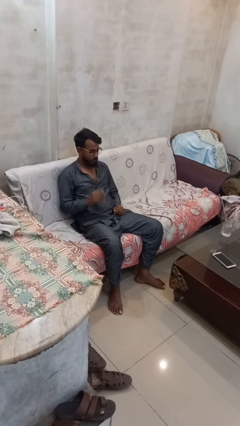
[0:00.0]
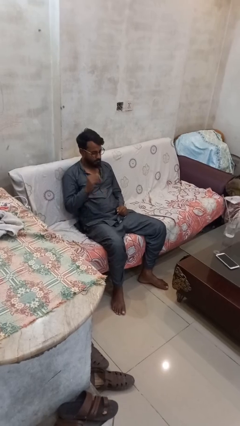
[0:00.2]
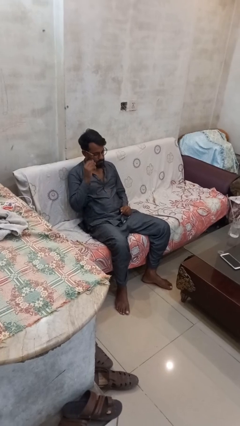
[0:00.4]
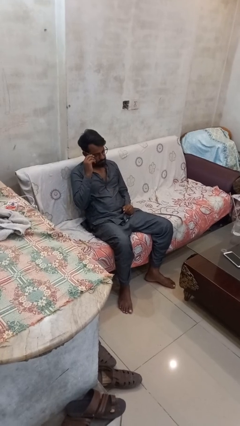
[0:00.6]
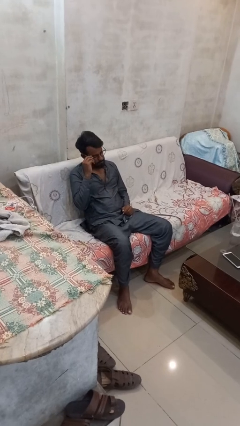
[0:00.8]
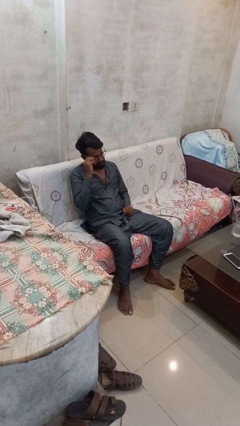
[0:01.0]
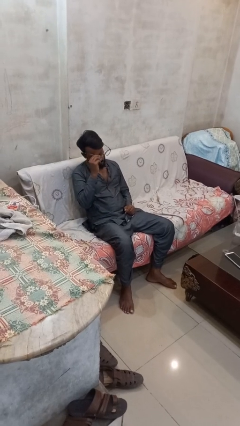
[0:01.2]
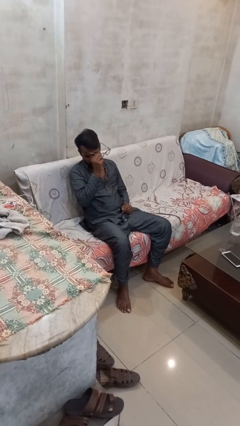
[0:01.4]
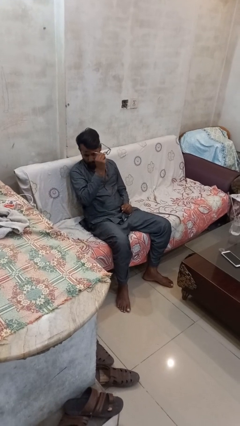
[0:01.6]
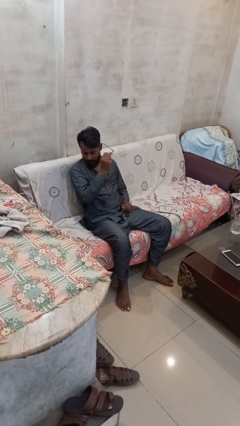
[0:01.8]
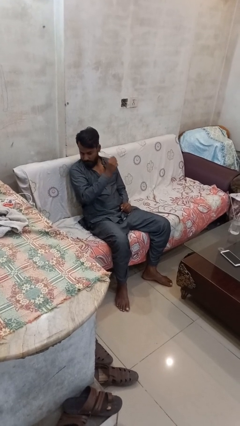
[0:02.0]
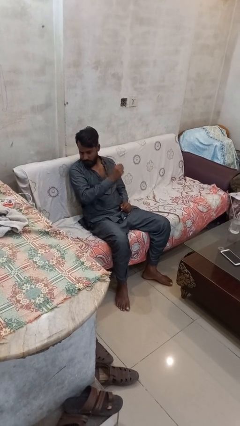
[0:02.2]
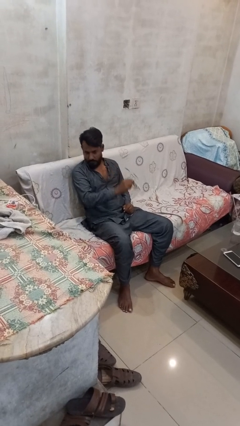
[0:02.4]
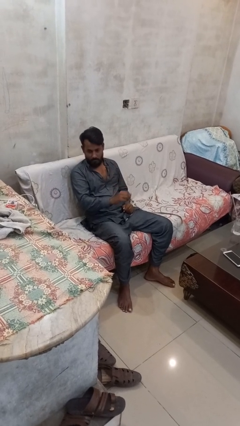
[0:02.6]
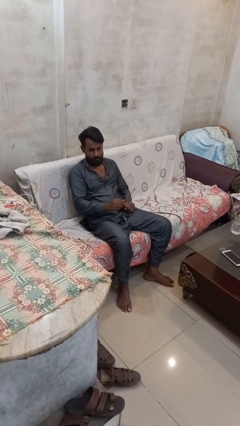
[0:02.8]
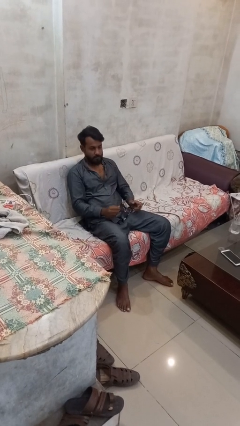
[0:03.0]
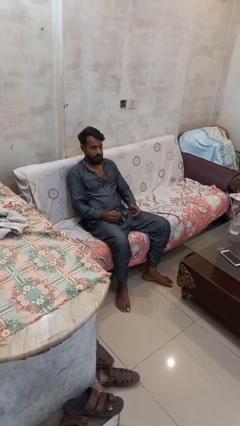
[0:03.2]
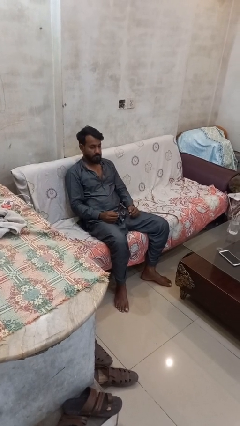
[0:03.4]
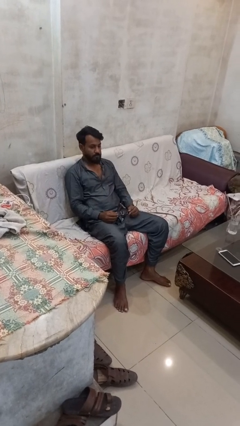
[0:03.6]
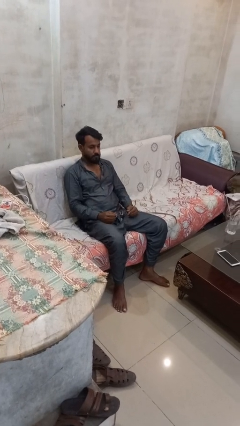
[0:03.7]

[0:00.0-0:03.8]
person takes off glasses

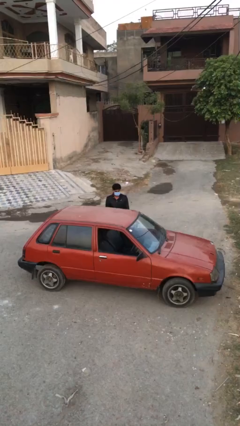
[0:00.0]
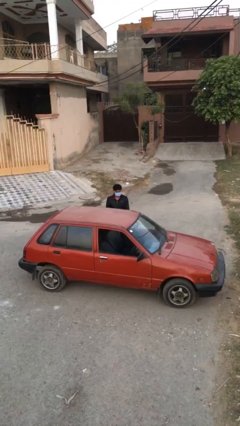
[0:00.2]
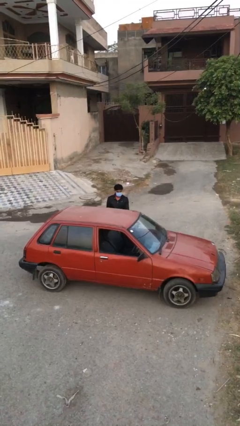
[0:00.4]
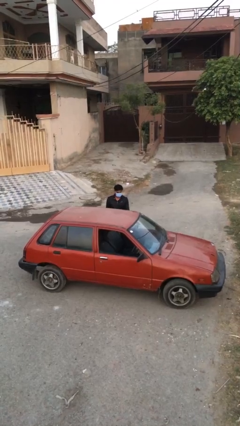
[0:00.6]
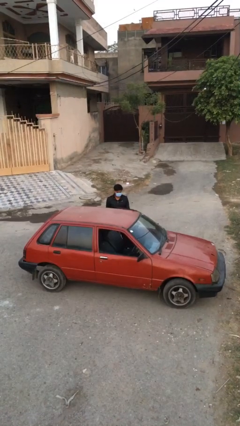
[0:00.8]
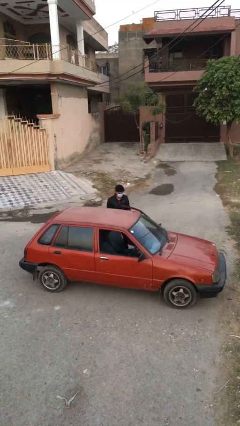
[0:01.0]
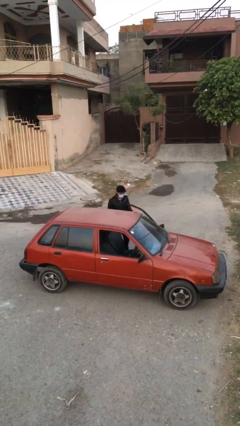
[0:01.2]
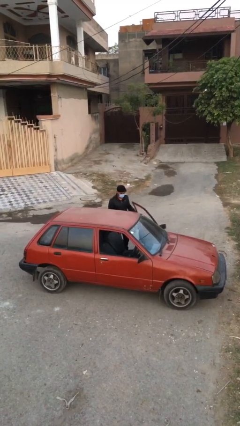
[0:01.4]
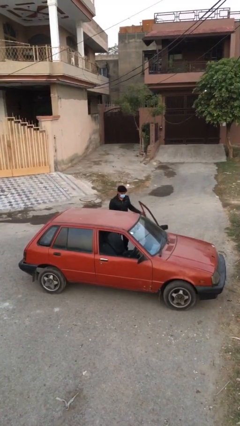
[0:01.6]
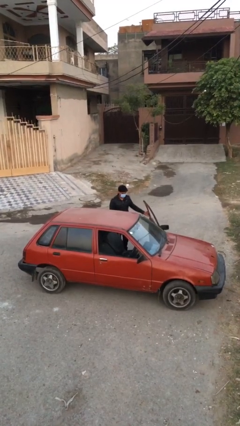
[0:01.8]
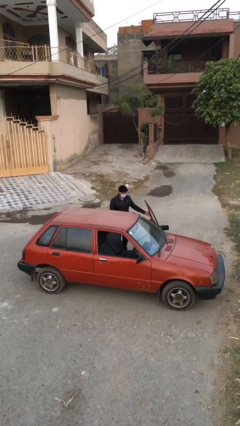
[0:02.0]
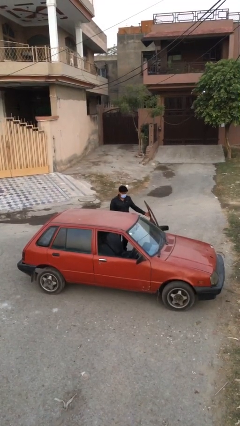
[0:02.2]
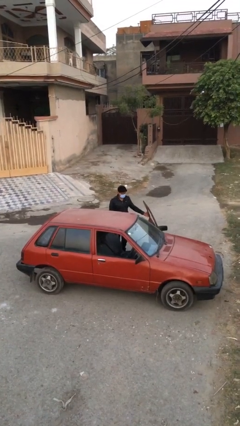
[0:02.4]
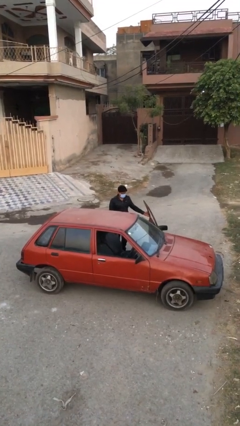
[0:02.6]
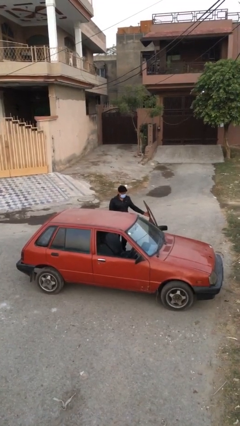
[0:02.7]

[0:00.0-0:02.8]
person opens car door

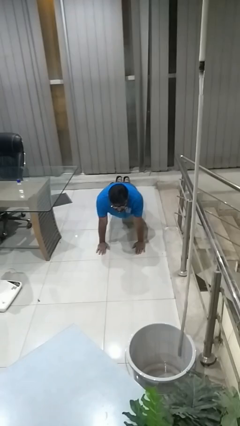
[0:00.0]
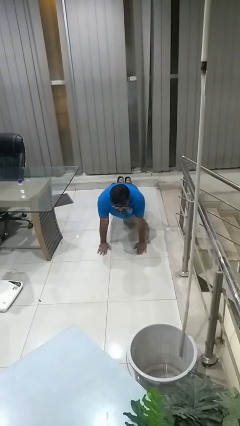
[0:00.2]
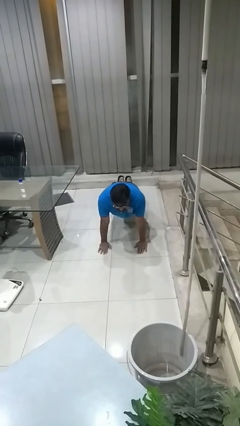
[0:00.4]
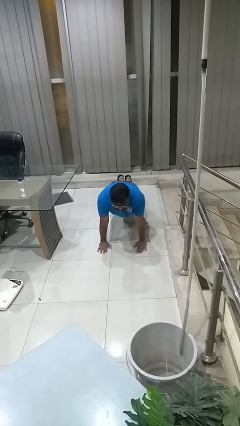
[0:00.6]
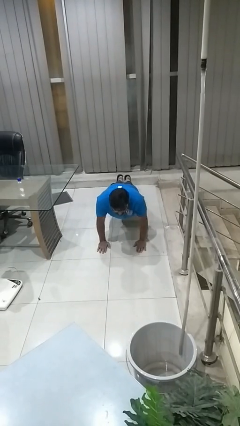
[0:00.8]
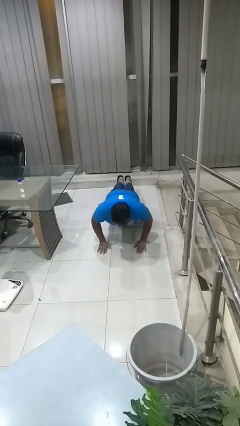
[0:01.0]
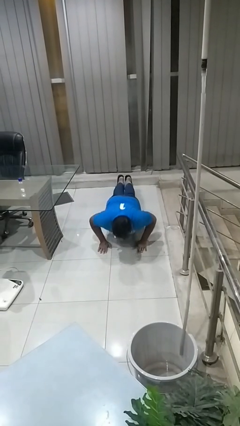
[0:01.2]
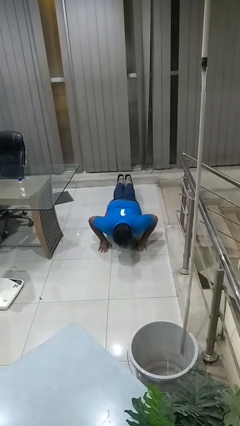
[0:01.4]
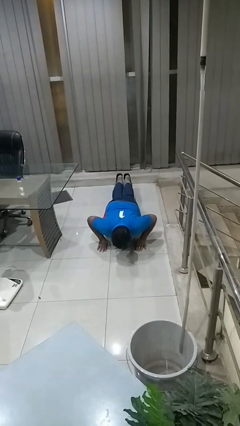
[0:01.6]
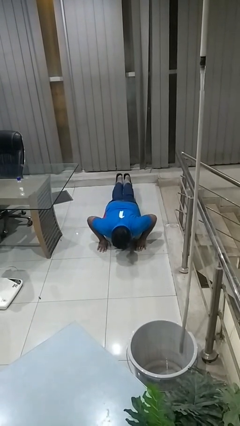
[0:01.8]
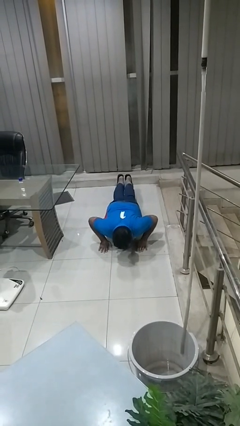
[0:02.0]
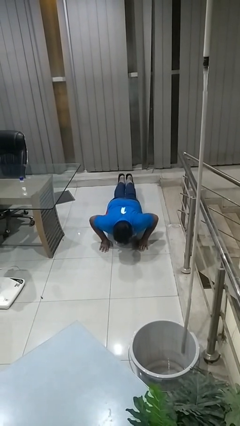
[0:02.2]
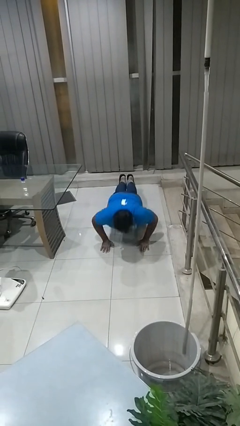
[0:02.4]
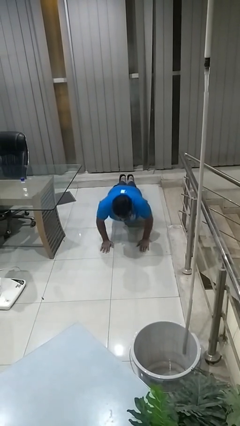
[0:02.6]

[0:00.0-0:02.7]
person exercises with pushup

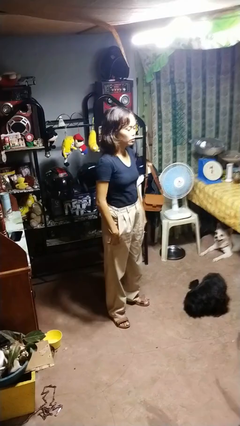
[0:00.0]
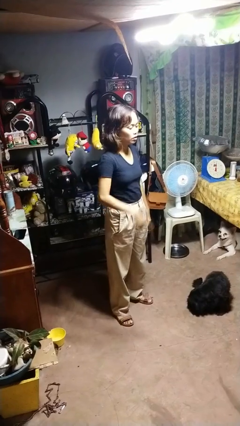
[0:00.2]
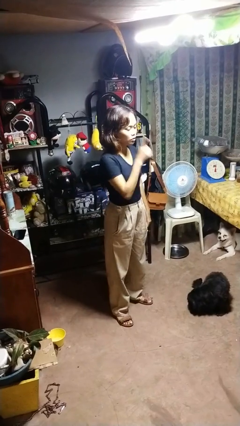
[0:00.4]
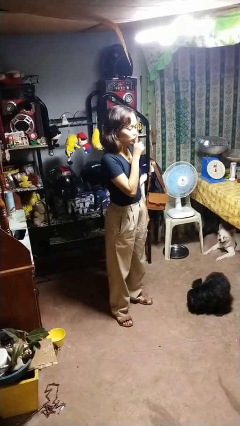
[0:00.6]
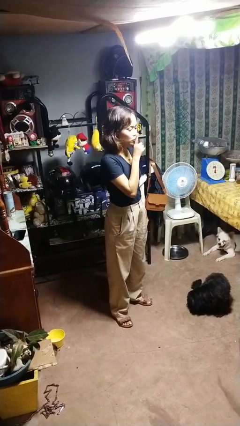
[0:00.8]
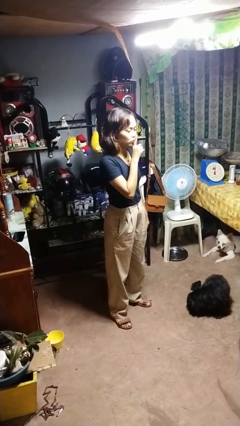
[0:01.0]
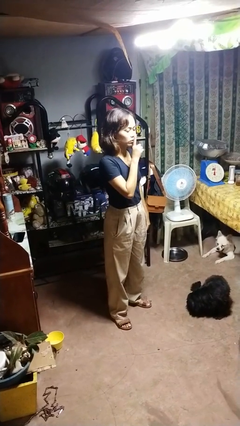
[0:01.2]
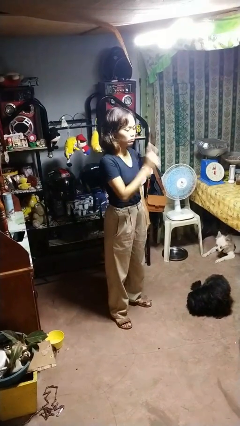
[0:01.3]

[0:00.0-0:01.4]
person gestures be quiet

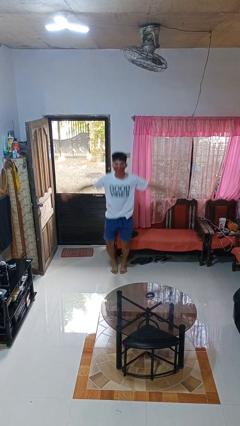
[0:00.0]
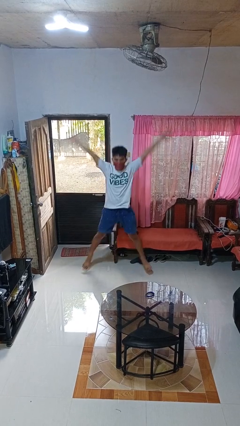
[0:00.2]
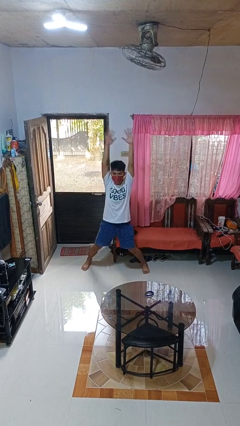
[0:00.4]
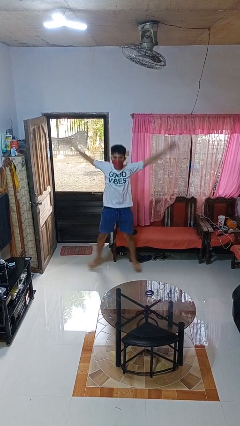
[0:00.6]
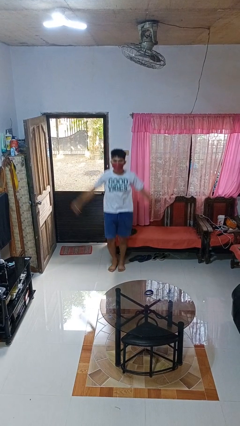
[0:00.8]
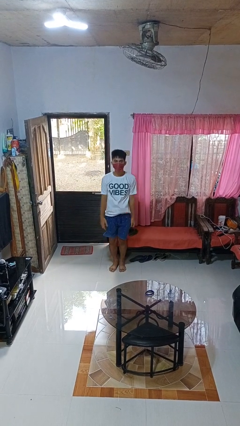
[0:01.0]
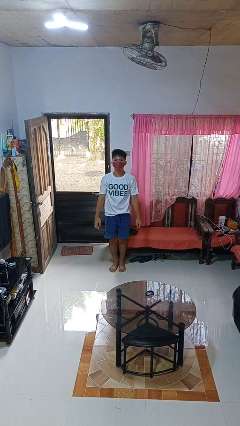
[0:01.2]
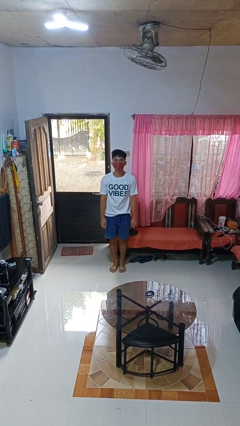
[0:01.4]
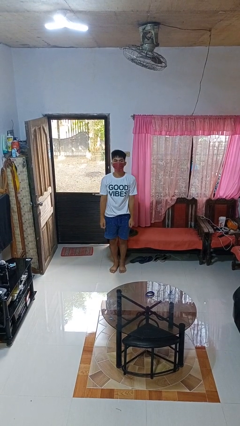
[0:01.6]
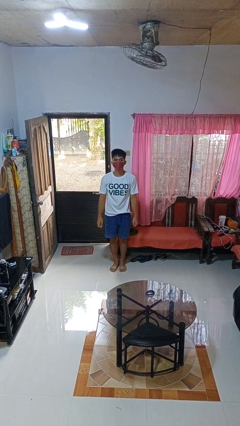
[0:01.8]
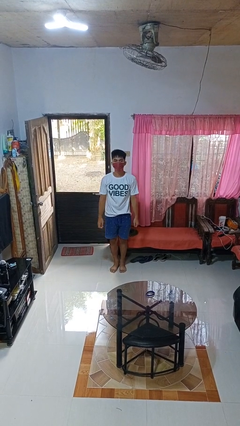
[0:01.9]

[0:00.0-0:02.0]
person exercises with jumping jacks

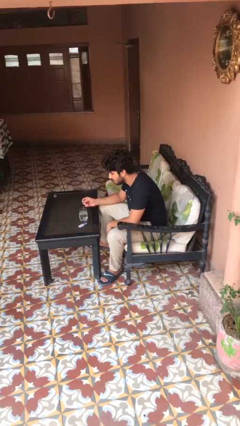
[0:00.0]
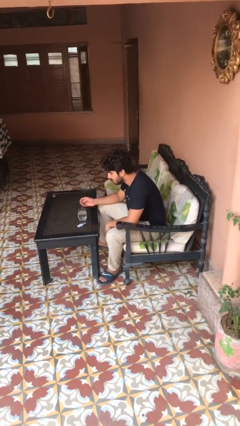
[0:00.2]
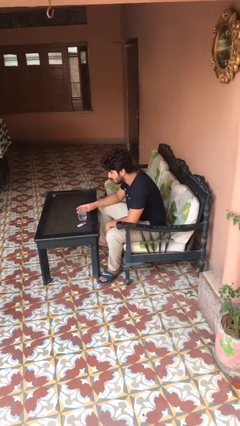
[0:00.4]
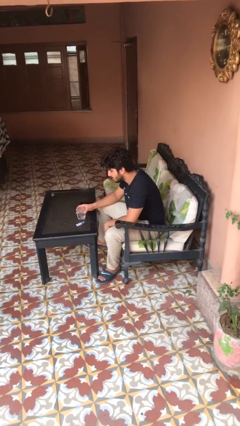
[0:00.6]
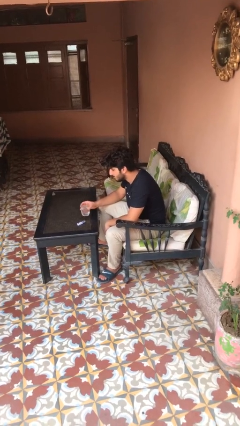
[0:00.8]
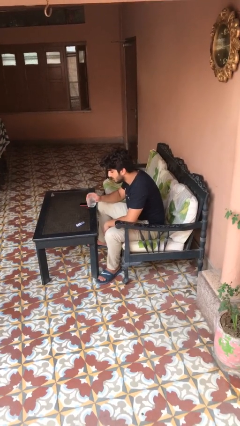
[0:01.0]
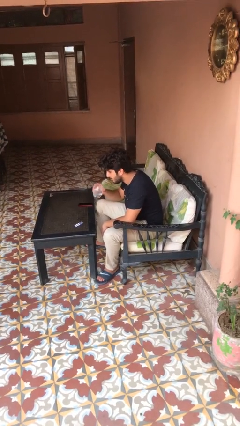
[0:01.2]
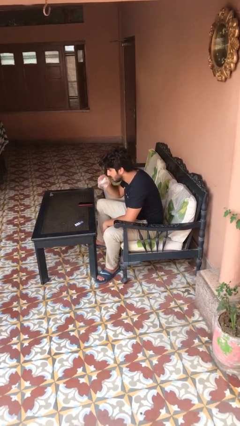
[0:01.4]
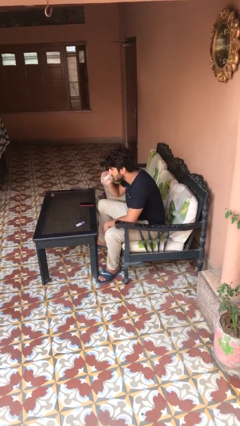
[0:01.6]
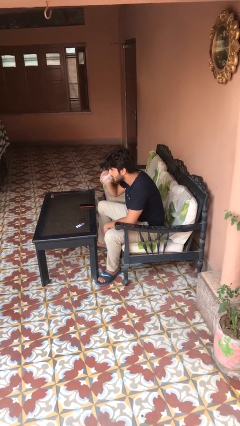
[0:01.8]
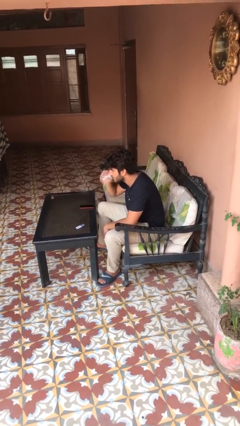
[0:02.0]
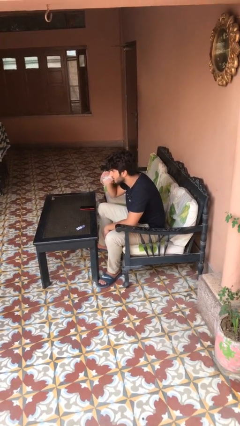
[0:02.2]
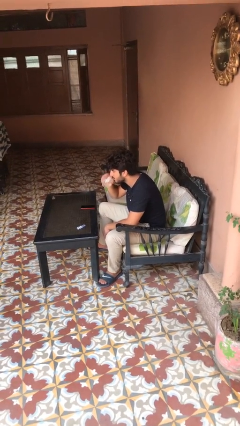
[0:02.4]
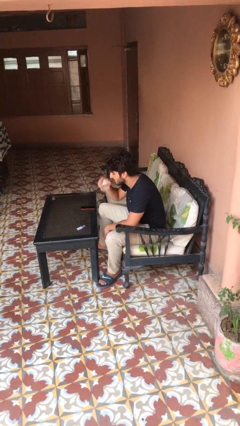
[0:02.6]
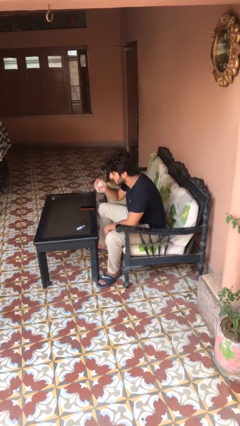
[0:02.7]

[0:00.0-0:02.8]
person drinks from cup

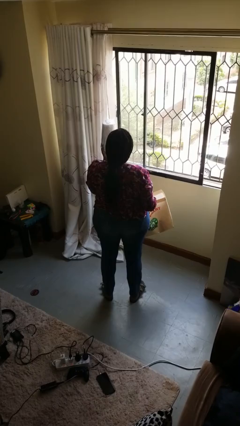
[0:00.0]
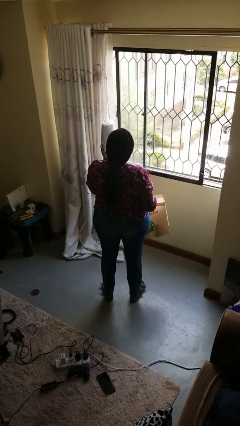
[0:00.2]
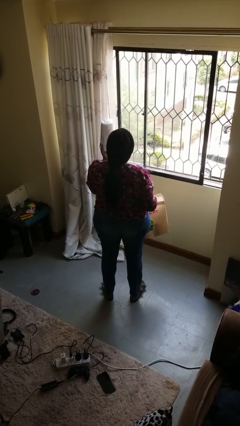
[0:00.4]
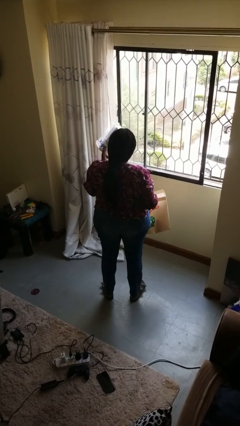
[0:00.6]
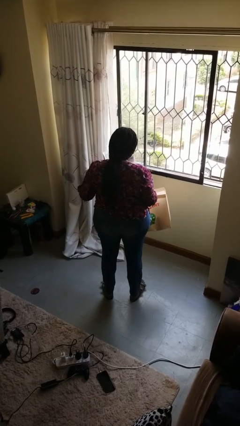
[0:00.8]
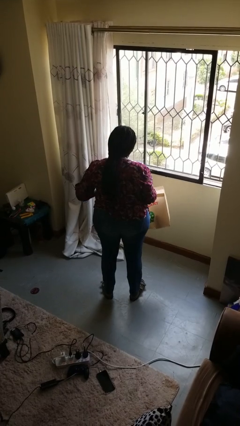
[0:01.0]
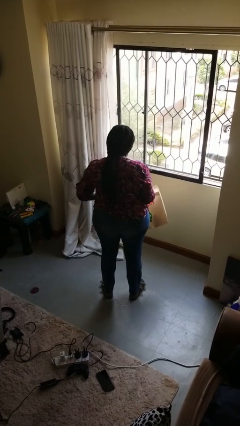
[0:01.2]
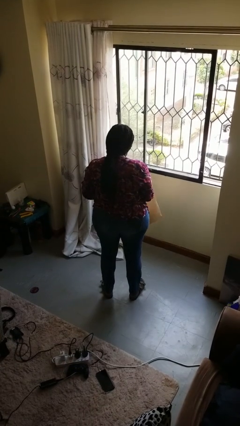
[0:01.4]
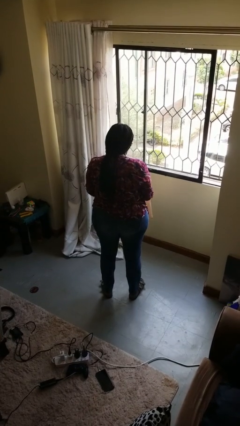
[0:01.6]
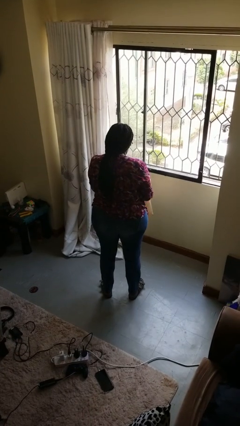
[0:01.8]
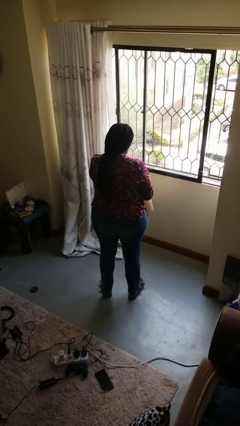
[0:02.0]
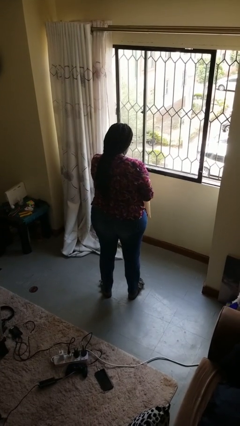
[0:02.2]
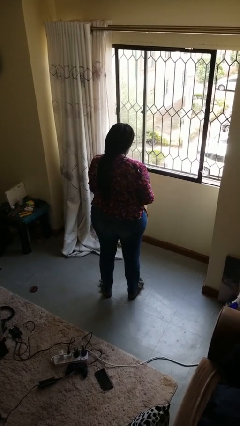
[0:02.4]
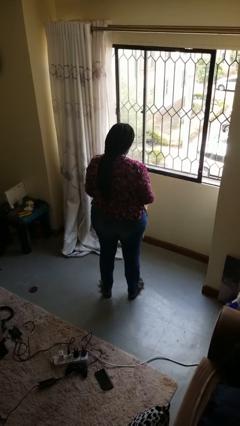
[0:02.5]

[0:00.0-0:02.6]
person puts object into bag
